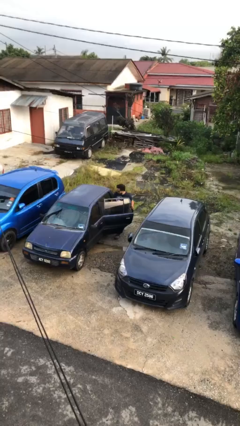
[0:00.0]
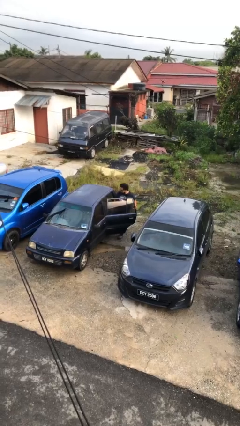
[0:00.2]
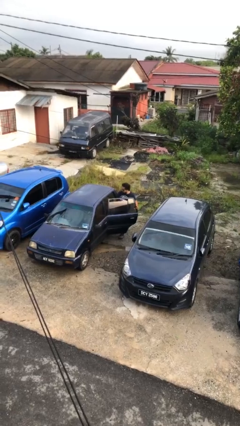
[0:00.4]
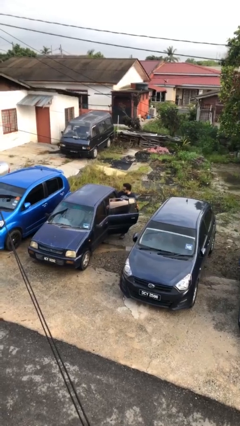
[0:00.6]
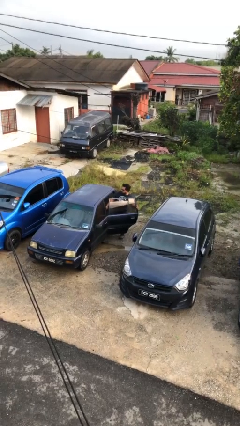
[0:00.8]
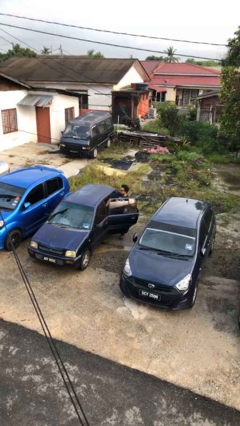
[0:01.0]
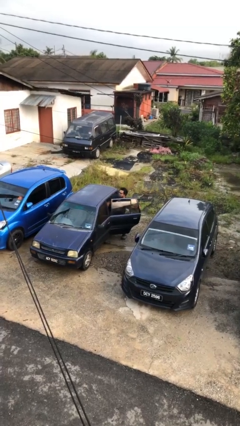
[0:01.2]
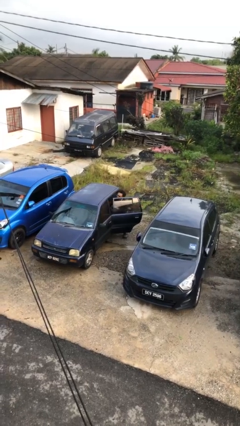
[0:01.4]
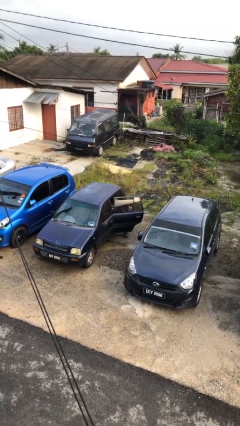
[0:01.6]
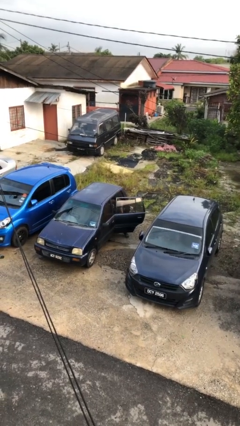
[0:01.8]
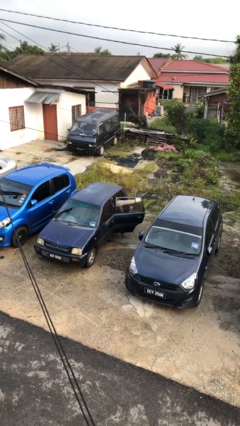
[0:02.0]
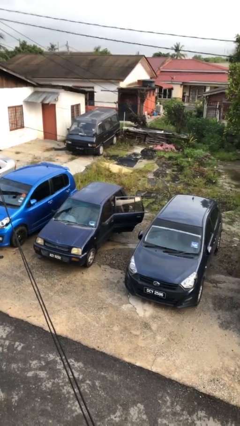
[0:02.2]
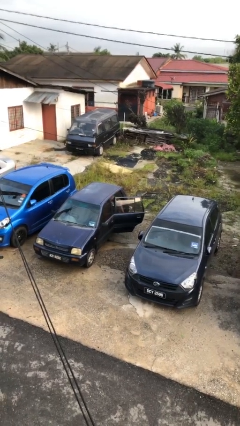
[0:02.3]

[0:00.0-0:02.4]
person enters car

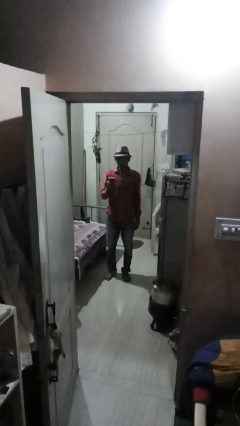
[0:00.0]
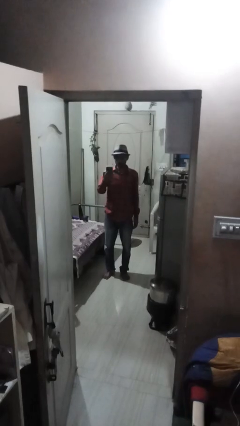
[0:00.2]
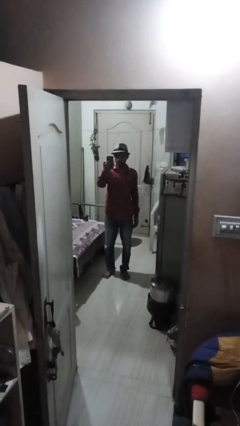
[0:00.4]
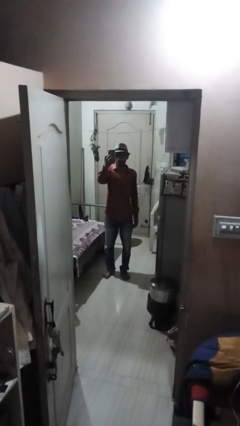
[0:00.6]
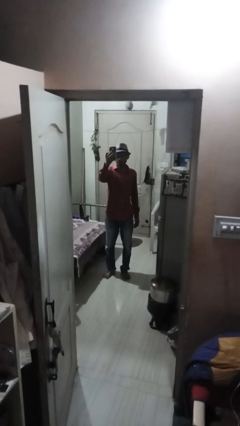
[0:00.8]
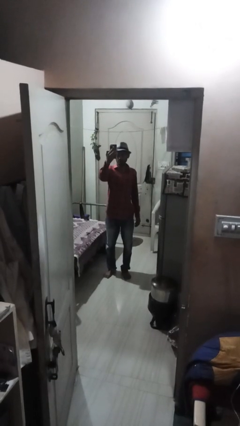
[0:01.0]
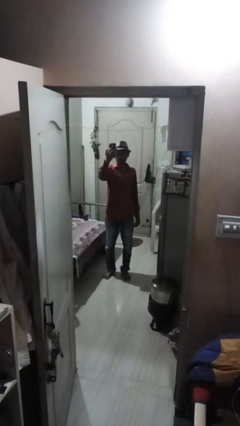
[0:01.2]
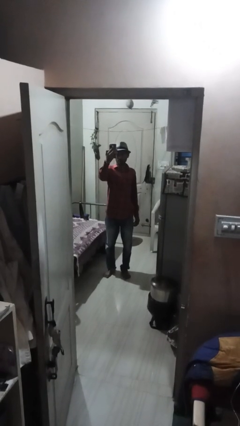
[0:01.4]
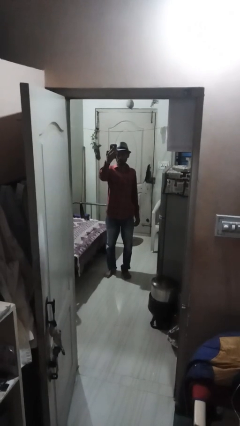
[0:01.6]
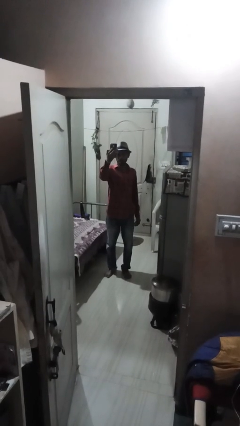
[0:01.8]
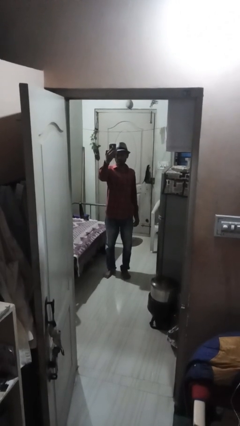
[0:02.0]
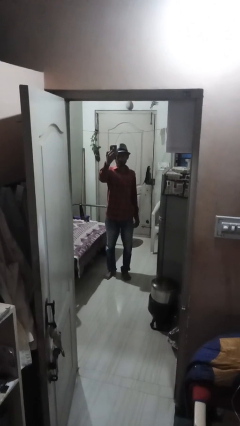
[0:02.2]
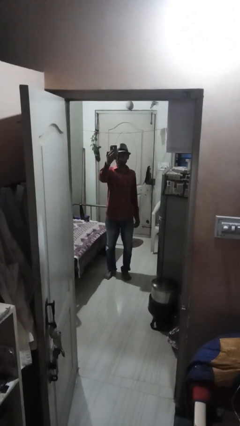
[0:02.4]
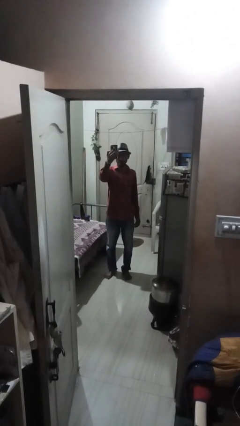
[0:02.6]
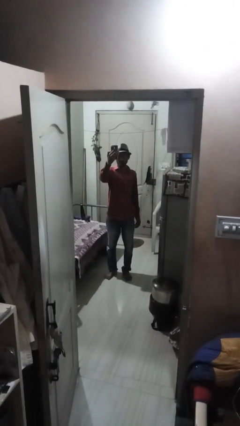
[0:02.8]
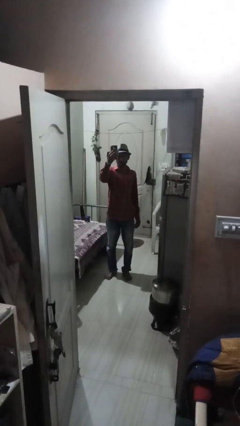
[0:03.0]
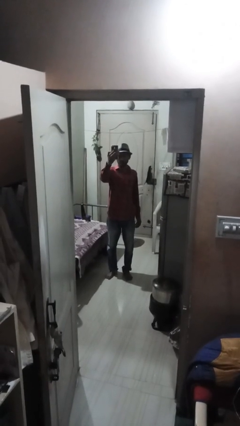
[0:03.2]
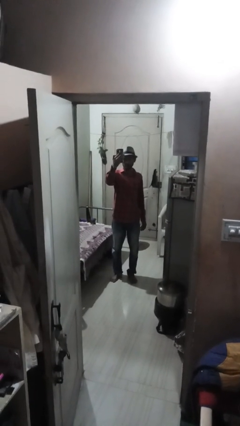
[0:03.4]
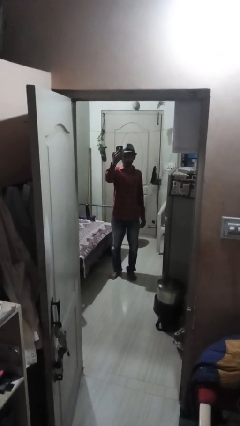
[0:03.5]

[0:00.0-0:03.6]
person takes selfie

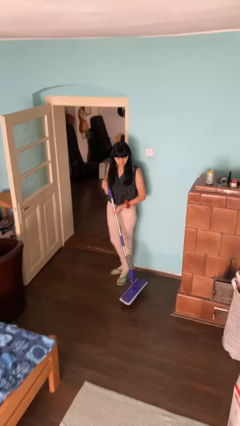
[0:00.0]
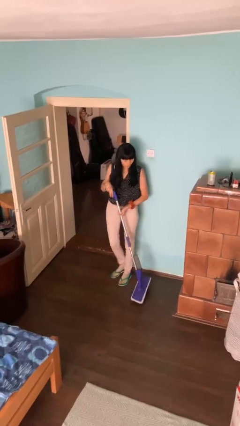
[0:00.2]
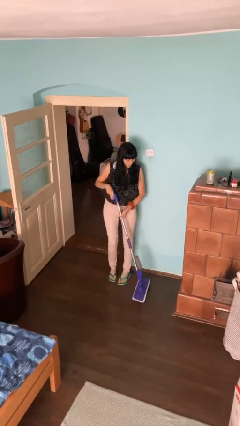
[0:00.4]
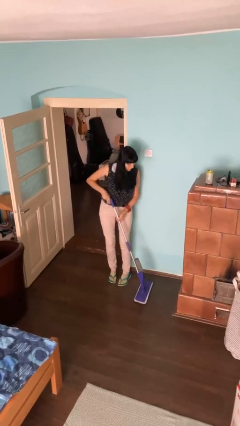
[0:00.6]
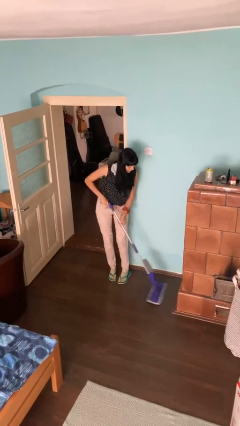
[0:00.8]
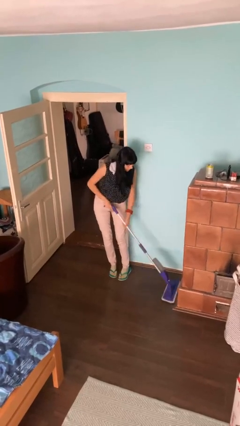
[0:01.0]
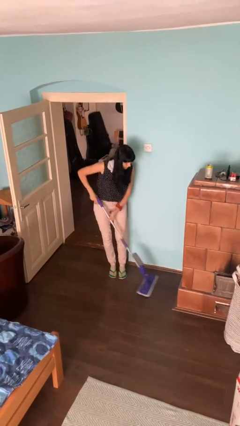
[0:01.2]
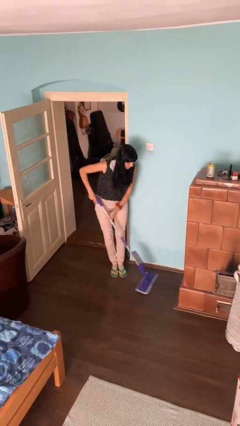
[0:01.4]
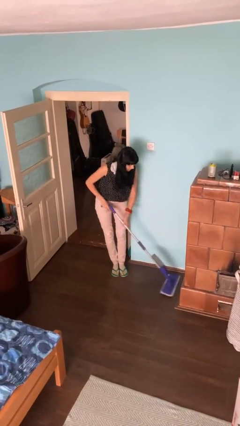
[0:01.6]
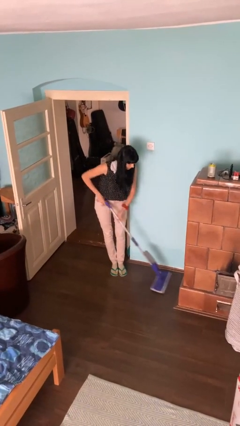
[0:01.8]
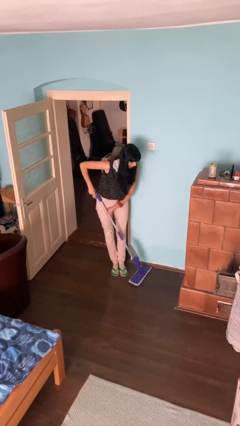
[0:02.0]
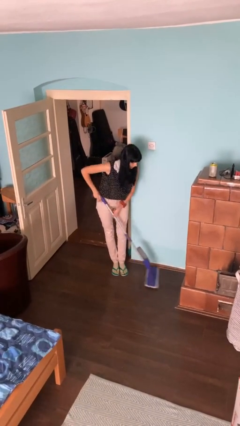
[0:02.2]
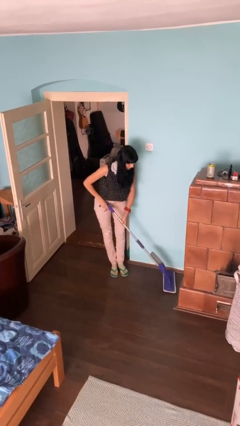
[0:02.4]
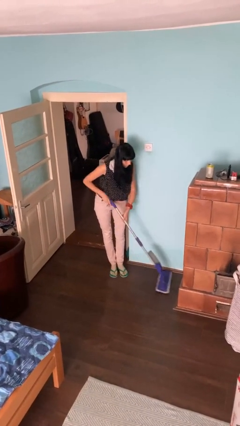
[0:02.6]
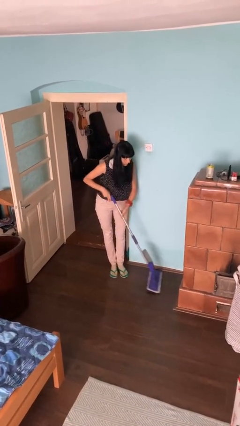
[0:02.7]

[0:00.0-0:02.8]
person mops

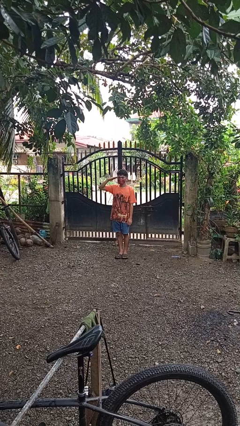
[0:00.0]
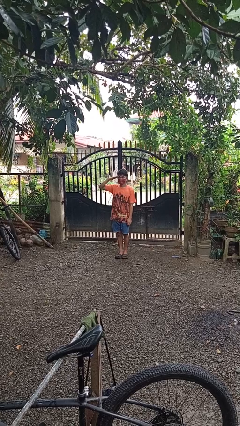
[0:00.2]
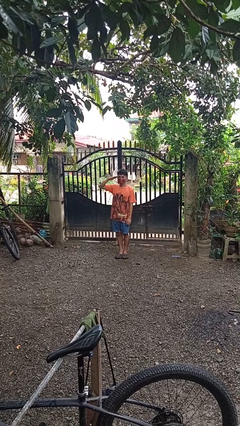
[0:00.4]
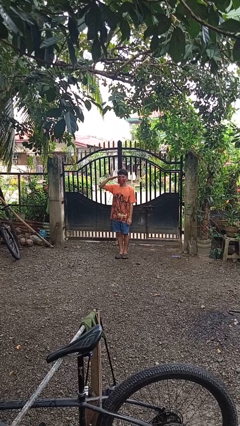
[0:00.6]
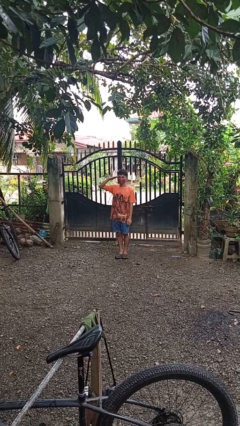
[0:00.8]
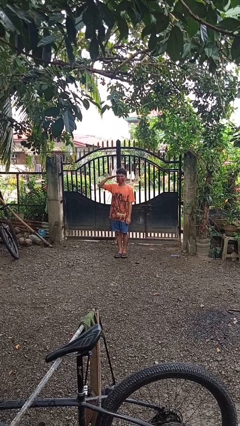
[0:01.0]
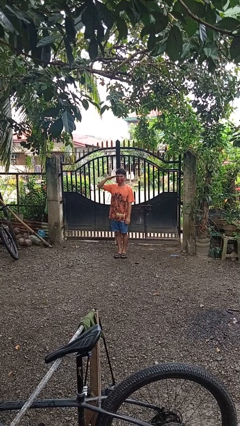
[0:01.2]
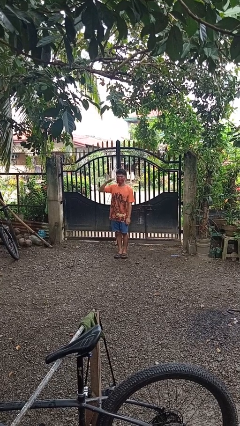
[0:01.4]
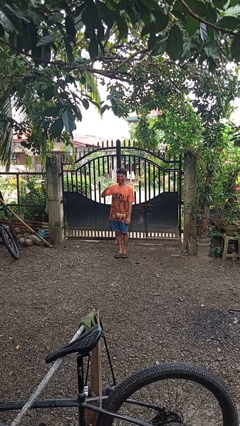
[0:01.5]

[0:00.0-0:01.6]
person salutes

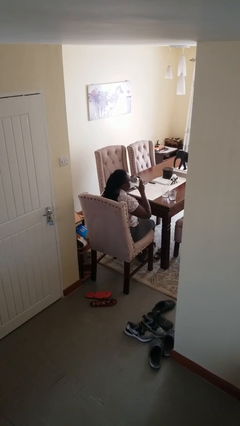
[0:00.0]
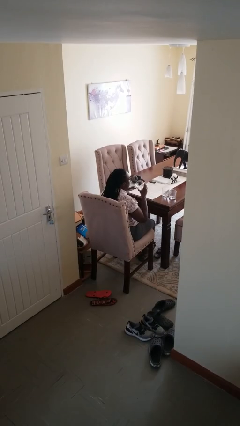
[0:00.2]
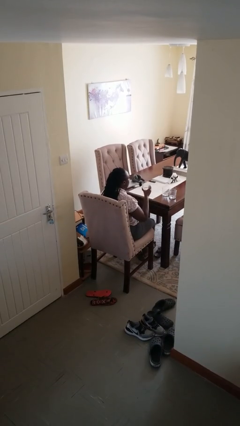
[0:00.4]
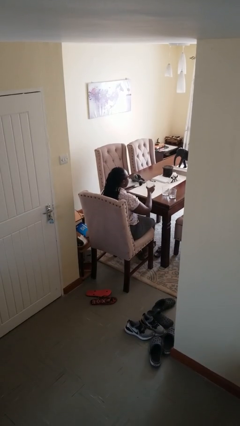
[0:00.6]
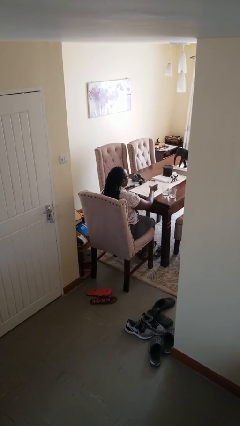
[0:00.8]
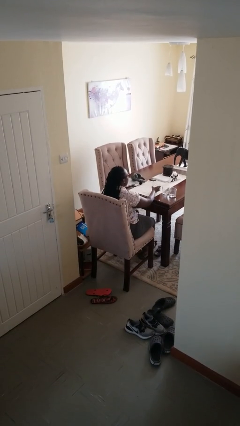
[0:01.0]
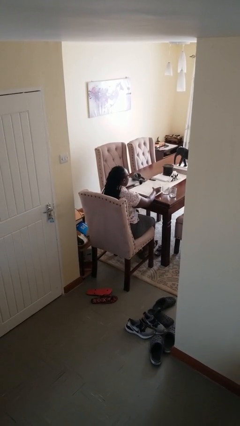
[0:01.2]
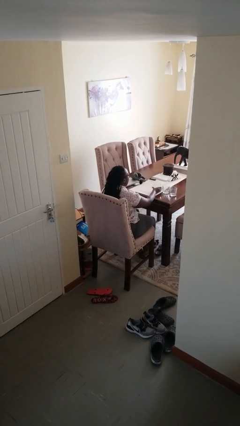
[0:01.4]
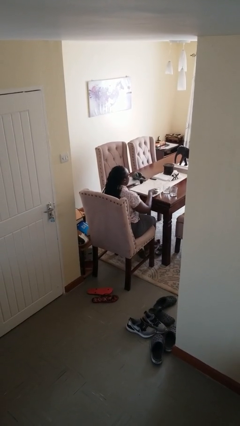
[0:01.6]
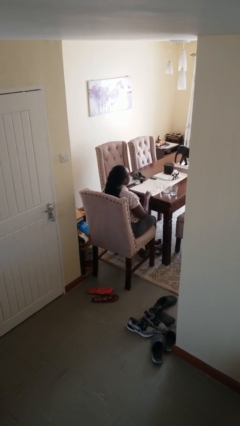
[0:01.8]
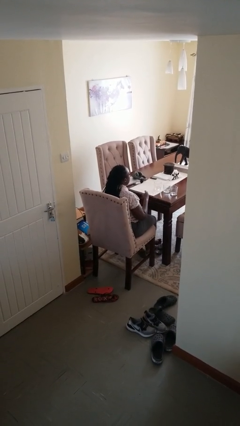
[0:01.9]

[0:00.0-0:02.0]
person puts down object on table

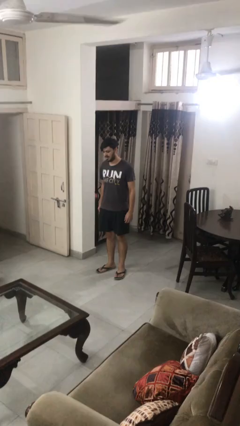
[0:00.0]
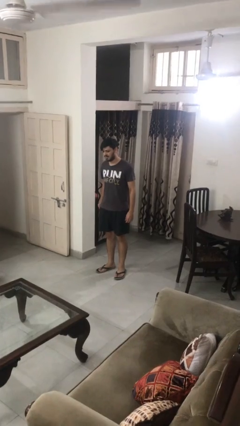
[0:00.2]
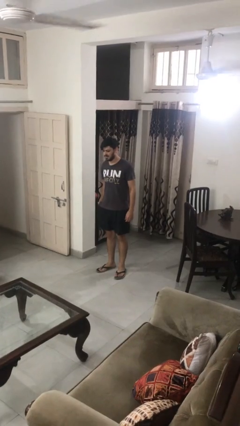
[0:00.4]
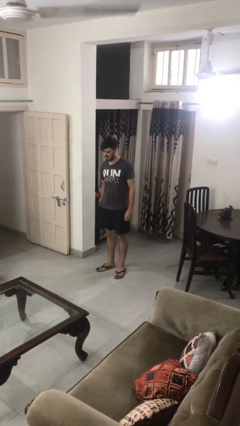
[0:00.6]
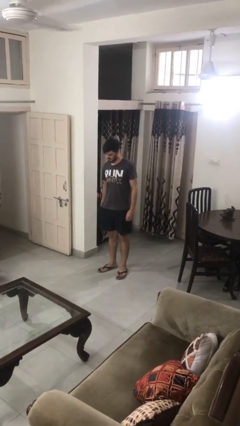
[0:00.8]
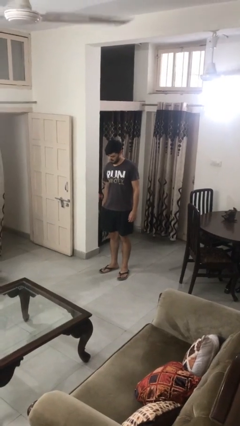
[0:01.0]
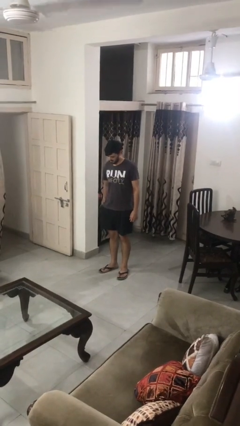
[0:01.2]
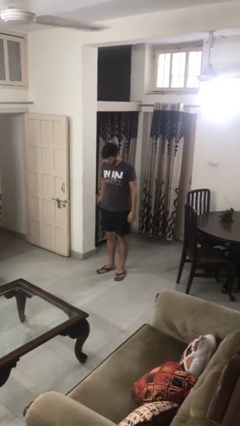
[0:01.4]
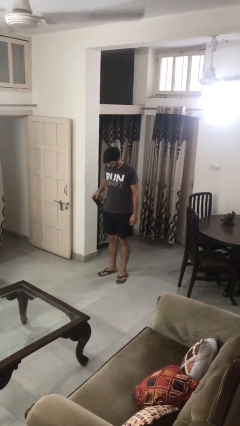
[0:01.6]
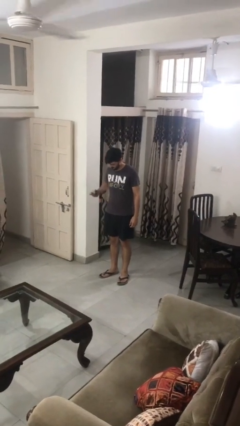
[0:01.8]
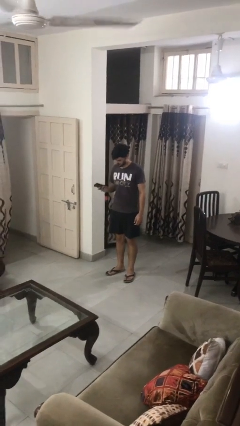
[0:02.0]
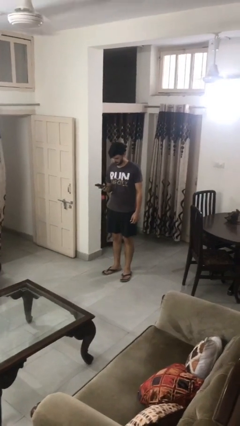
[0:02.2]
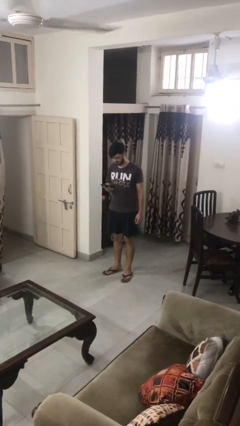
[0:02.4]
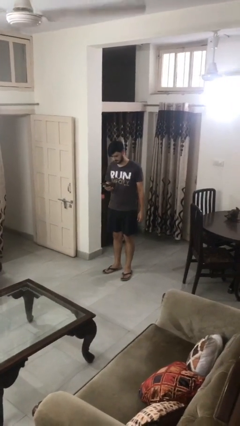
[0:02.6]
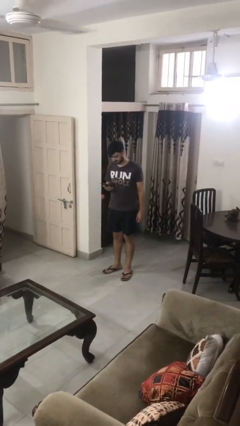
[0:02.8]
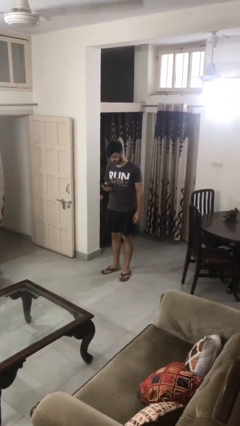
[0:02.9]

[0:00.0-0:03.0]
person takes phone from pocket

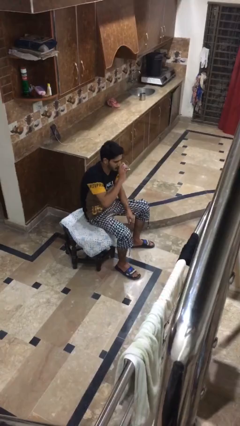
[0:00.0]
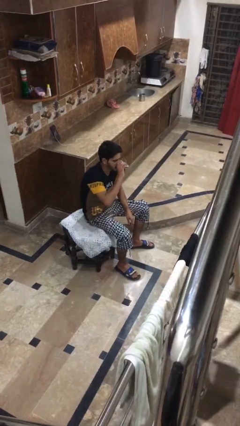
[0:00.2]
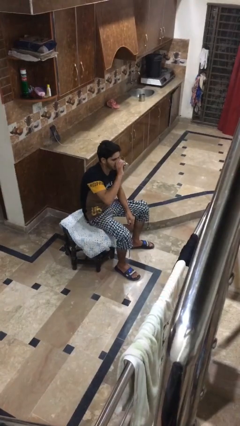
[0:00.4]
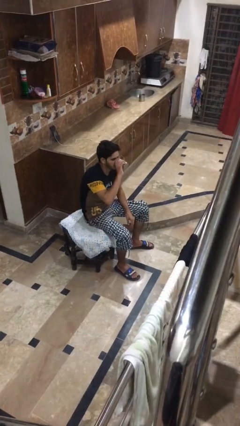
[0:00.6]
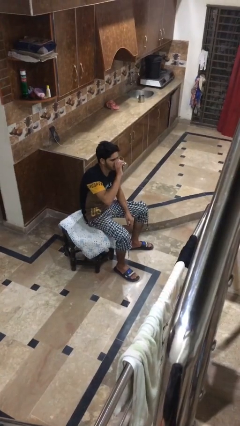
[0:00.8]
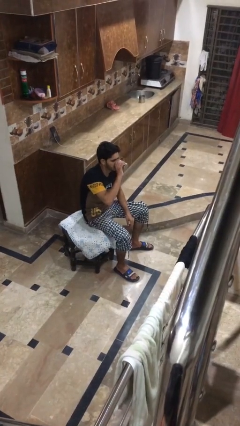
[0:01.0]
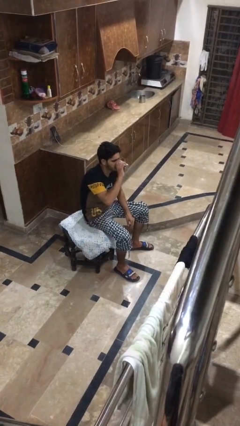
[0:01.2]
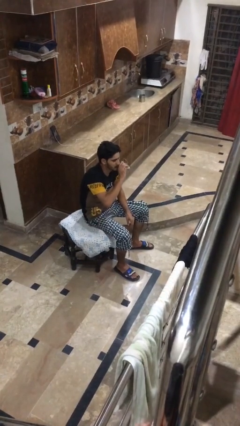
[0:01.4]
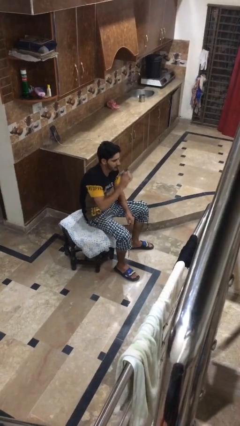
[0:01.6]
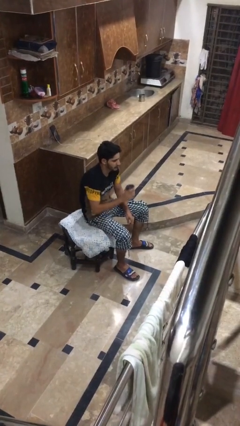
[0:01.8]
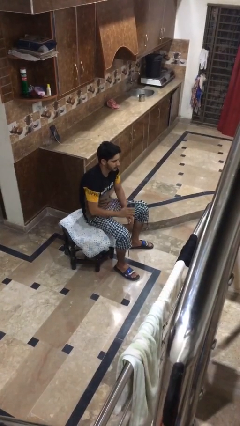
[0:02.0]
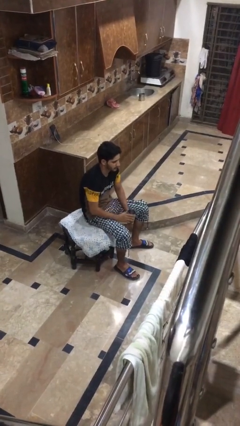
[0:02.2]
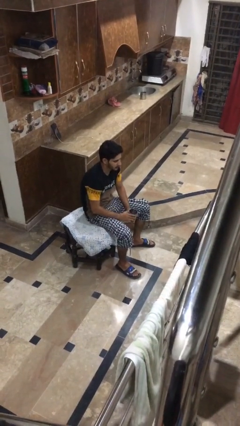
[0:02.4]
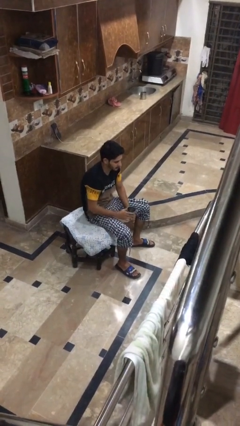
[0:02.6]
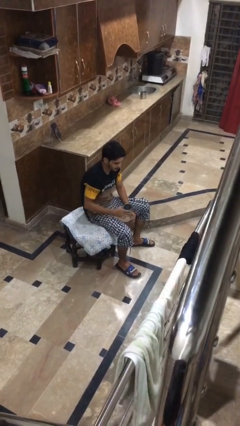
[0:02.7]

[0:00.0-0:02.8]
person drinks from mug
